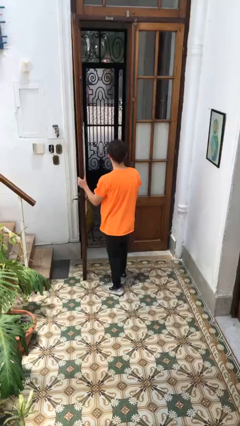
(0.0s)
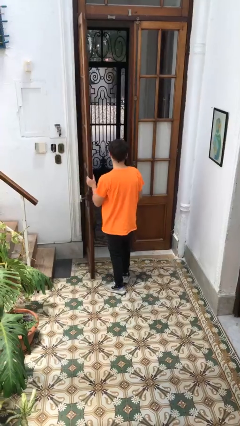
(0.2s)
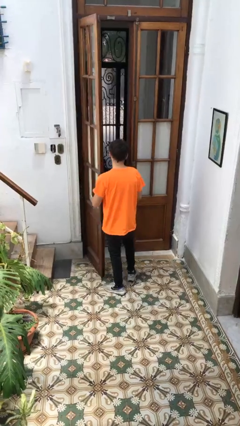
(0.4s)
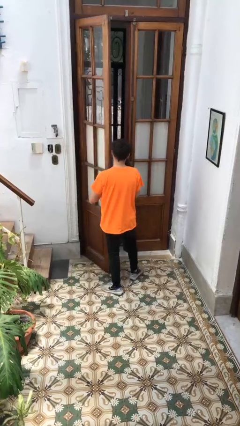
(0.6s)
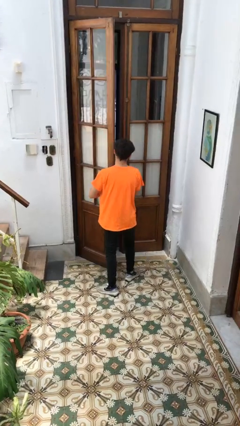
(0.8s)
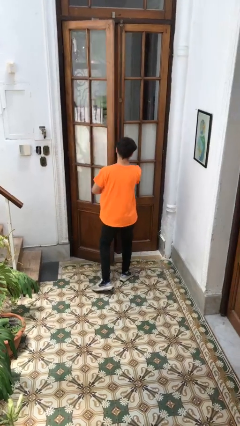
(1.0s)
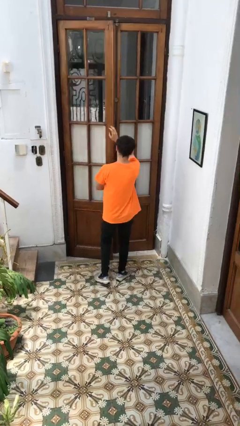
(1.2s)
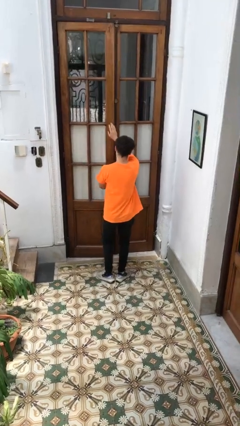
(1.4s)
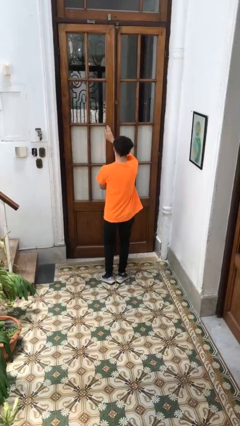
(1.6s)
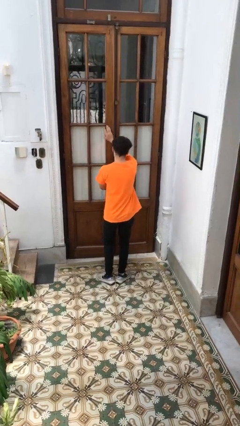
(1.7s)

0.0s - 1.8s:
person closes facility door

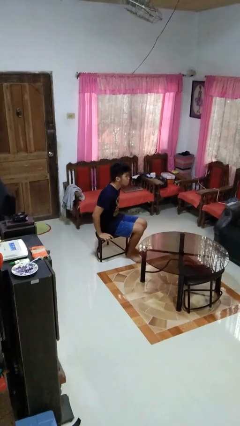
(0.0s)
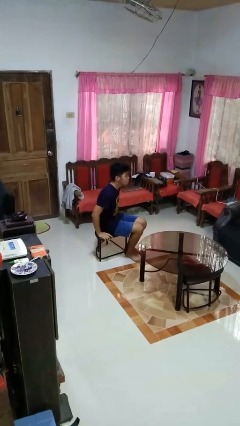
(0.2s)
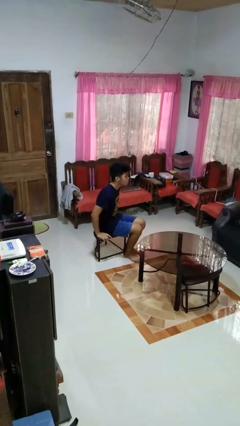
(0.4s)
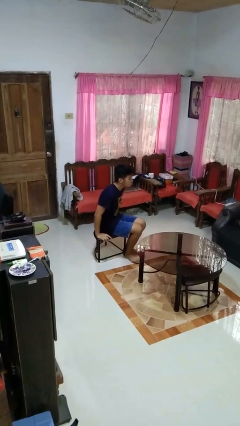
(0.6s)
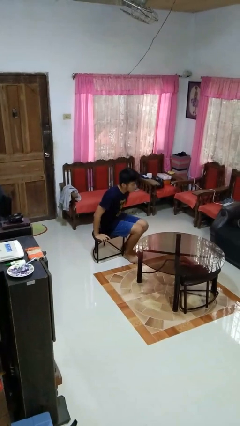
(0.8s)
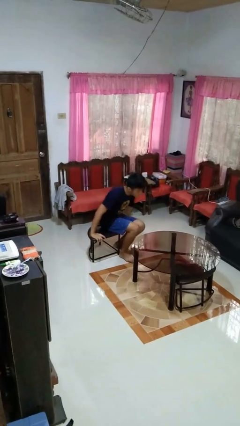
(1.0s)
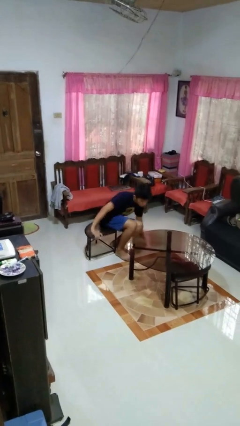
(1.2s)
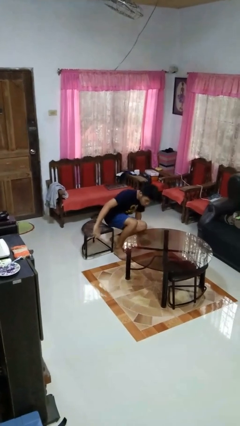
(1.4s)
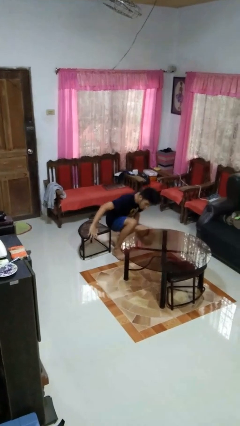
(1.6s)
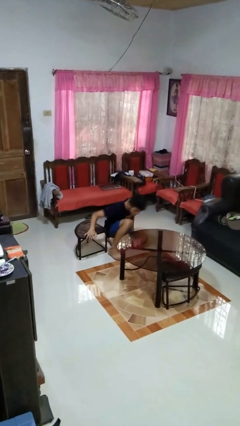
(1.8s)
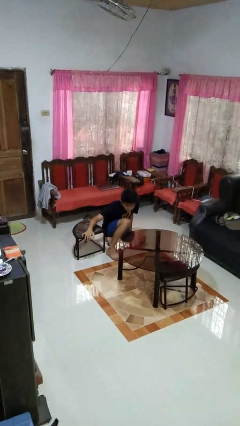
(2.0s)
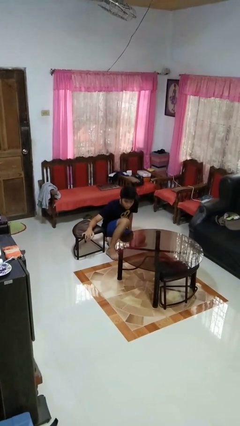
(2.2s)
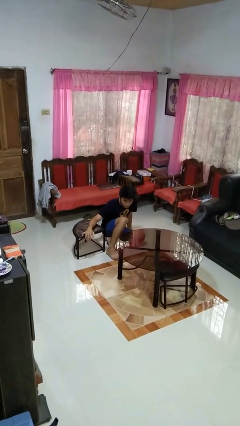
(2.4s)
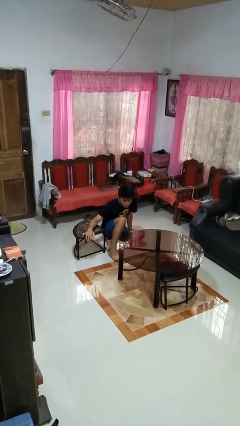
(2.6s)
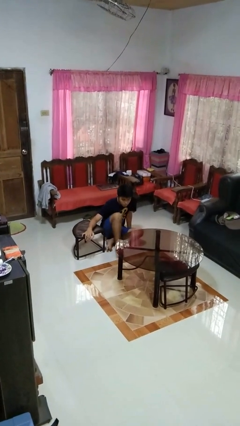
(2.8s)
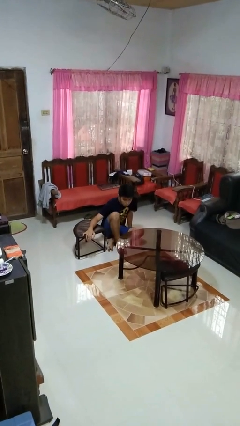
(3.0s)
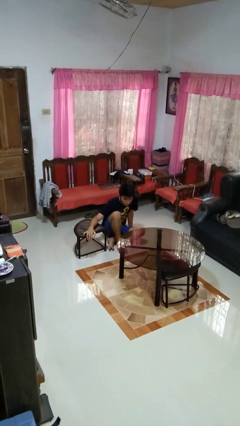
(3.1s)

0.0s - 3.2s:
person falls from chair

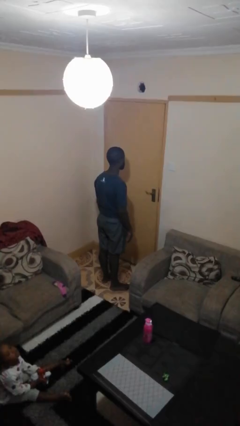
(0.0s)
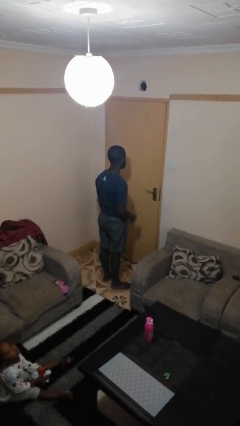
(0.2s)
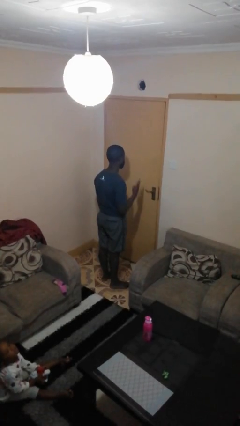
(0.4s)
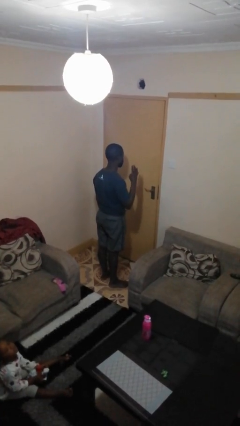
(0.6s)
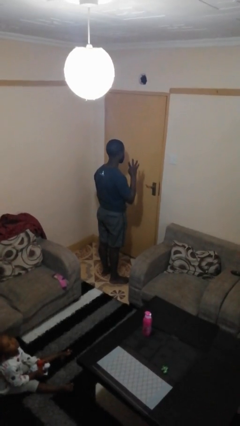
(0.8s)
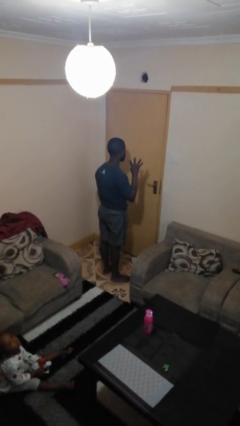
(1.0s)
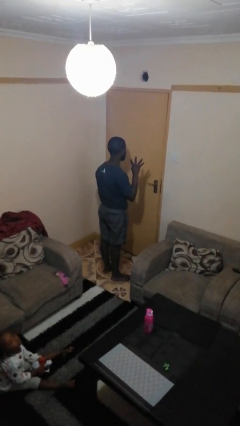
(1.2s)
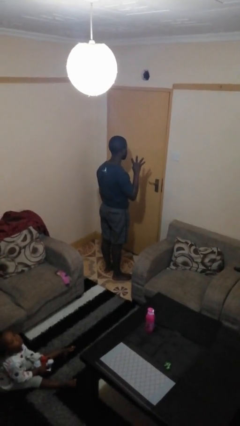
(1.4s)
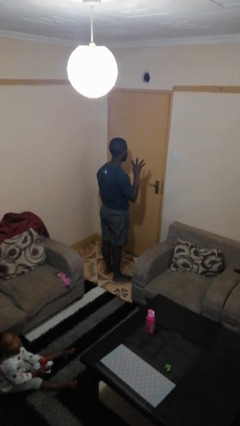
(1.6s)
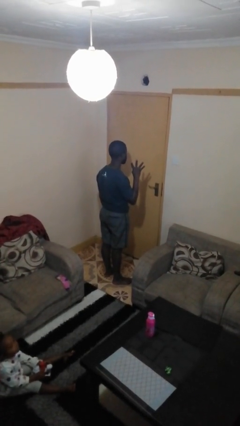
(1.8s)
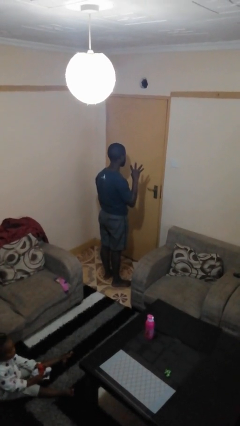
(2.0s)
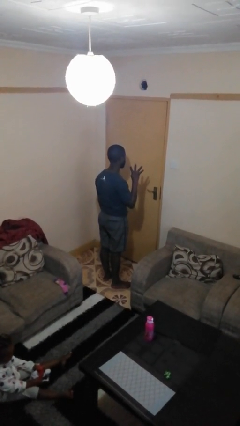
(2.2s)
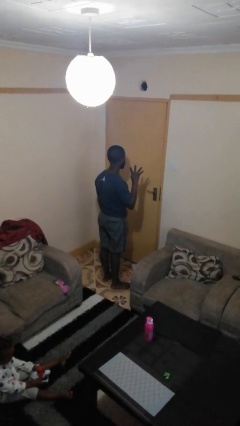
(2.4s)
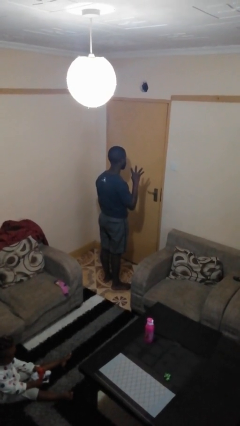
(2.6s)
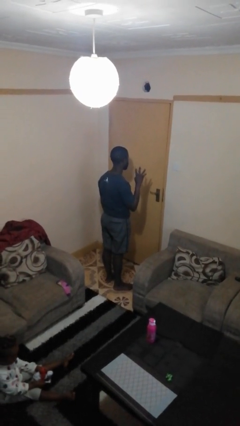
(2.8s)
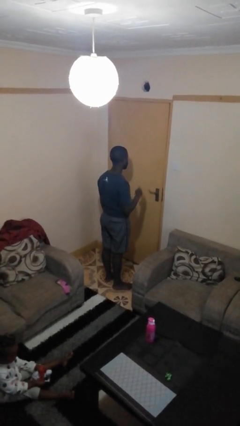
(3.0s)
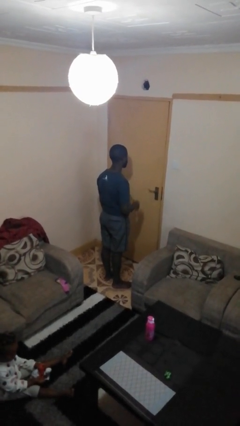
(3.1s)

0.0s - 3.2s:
person gestures number four

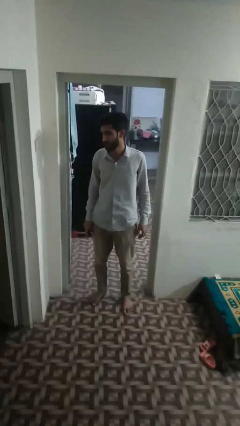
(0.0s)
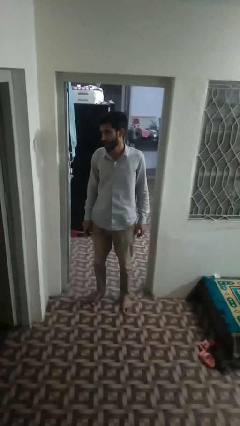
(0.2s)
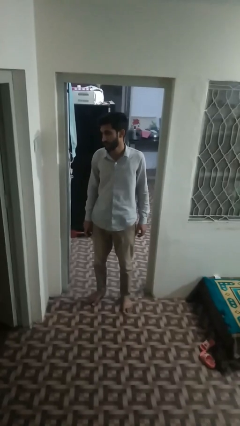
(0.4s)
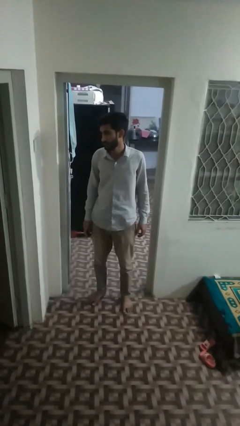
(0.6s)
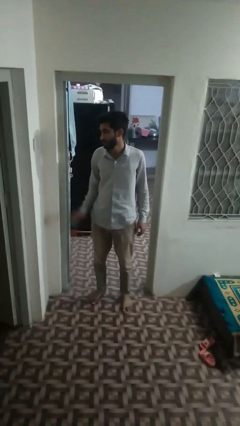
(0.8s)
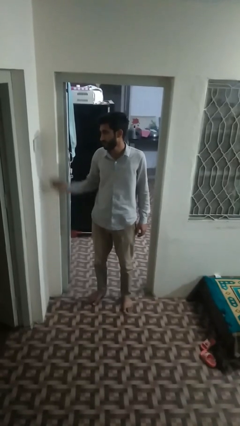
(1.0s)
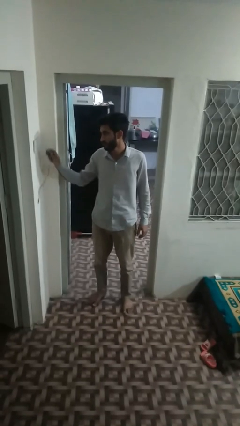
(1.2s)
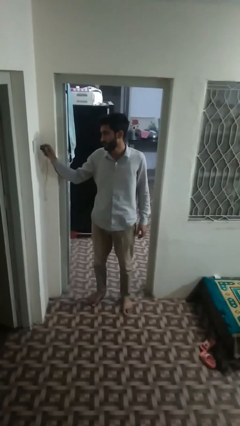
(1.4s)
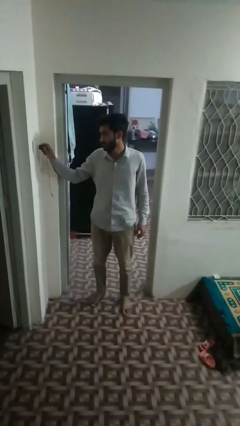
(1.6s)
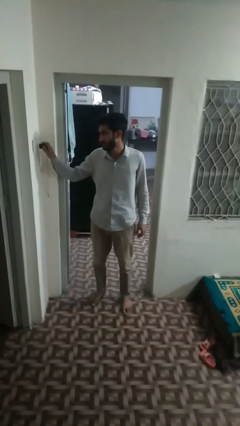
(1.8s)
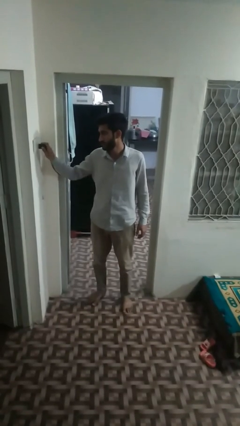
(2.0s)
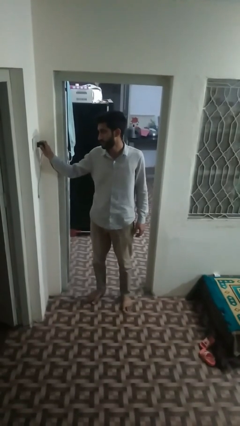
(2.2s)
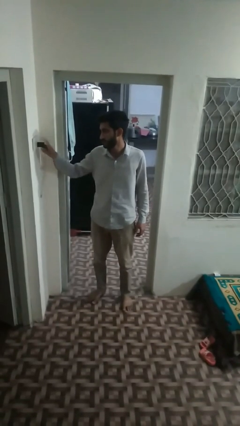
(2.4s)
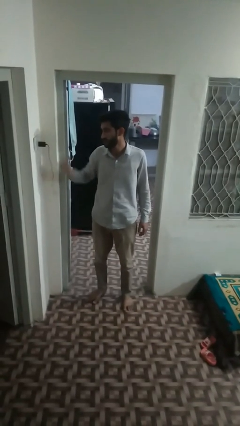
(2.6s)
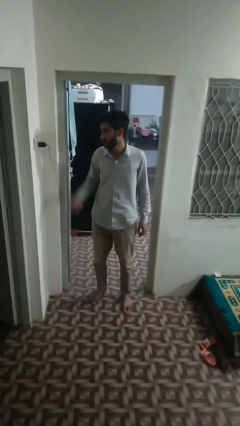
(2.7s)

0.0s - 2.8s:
person plugs into electrical socket

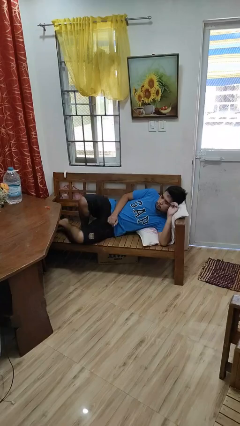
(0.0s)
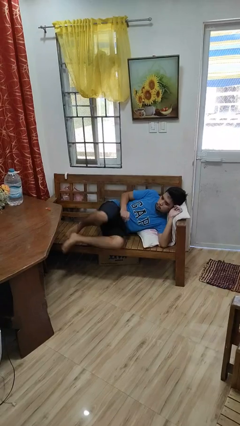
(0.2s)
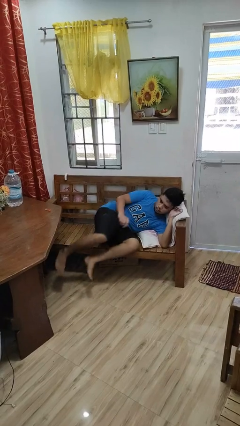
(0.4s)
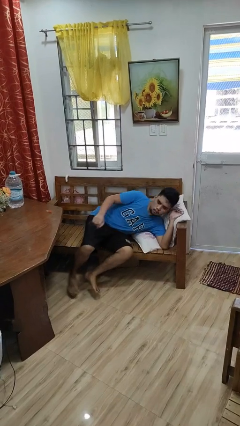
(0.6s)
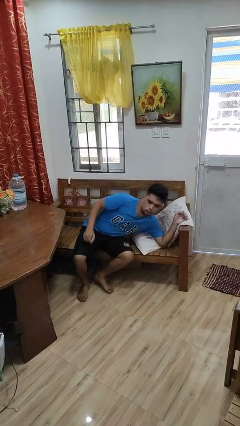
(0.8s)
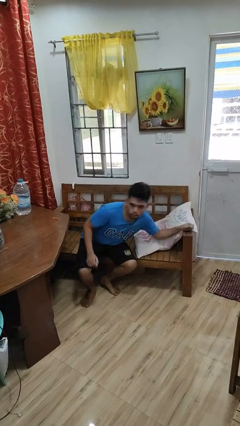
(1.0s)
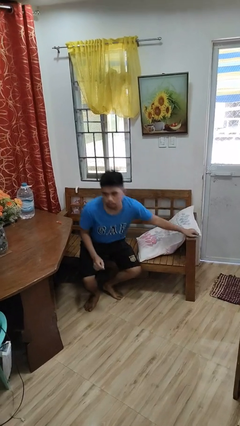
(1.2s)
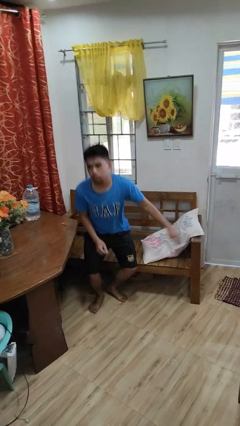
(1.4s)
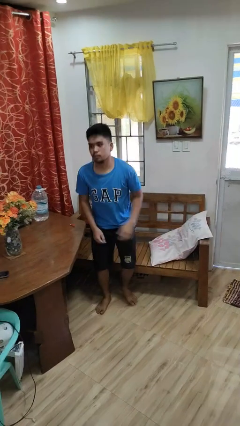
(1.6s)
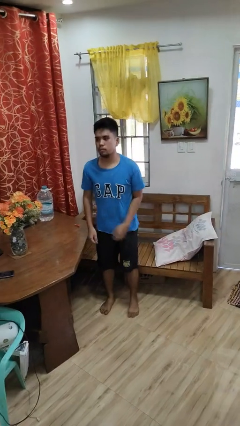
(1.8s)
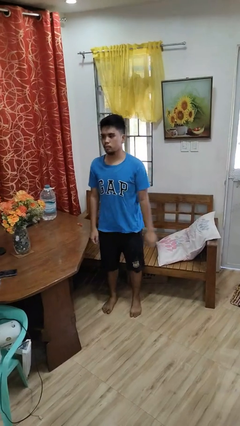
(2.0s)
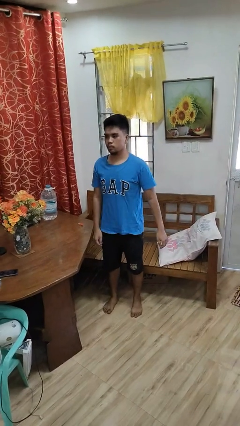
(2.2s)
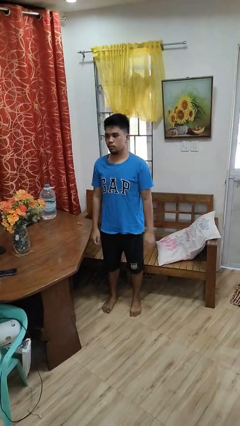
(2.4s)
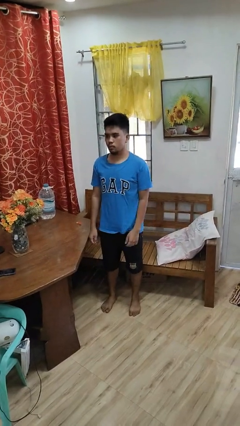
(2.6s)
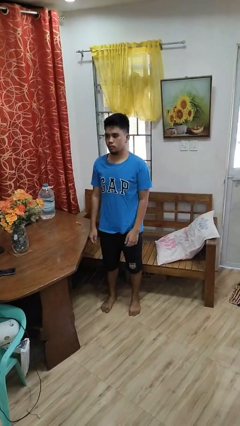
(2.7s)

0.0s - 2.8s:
person stands up

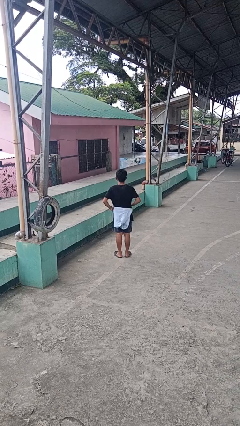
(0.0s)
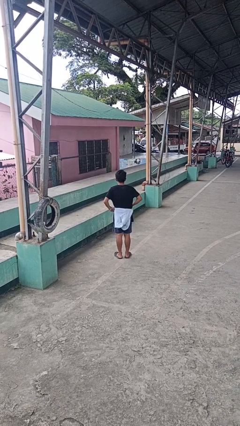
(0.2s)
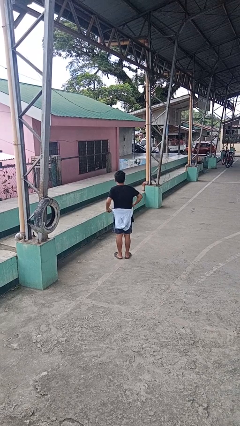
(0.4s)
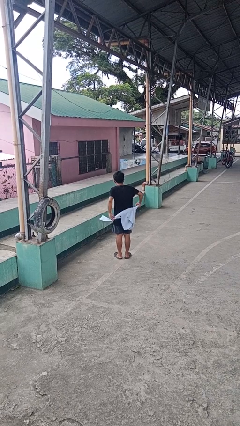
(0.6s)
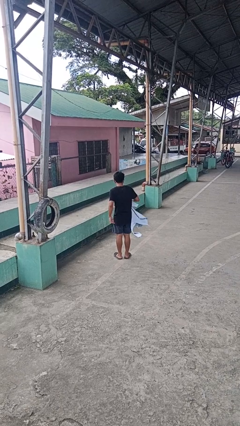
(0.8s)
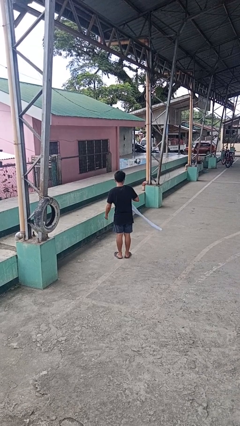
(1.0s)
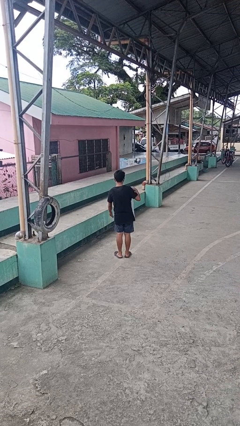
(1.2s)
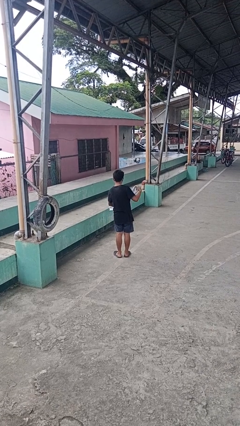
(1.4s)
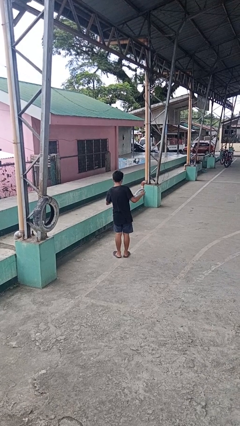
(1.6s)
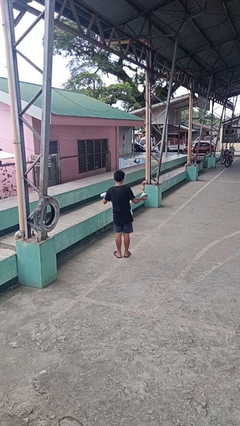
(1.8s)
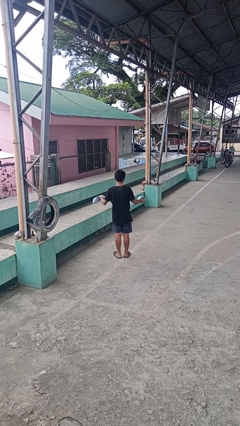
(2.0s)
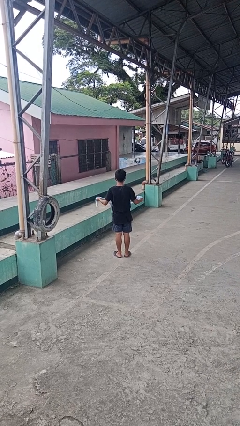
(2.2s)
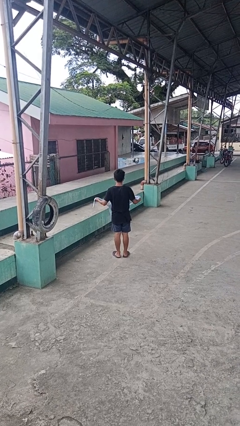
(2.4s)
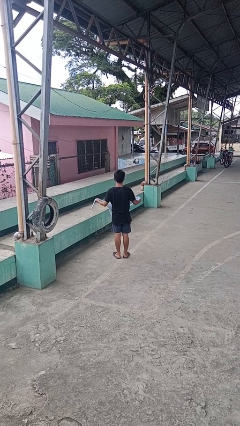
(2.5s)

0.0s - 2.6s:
person unties jacket around waist

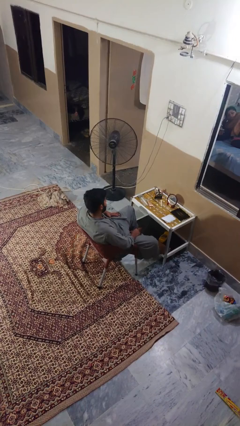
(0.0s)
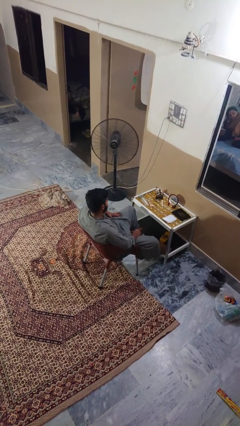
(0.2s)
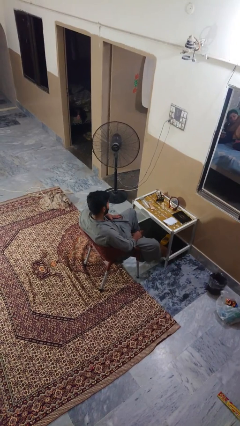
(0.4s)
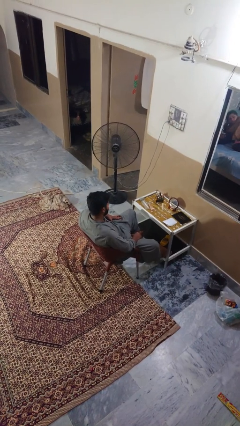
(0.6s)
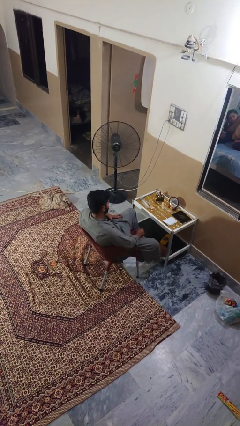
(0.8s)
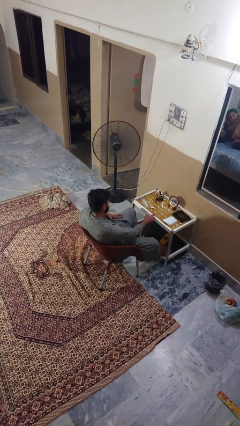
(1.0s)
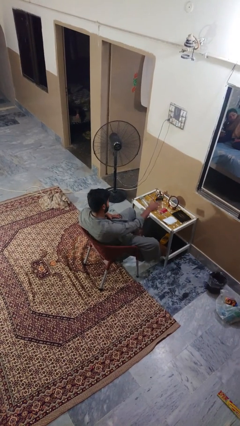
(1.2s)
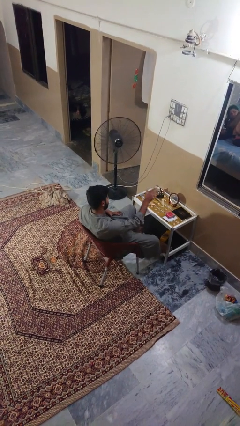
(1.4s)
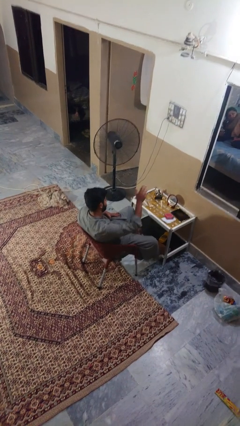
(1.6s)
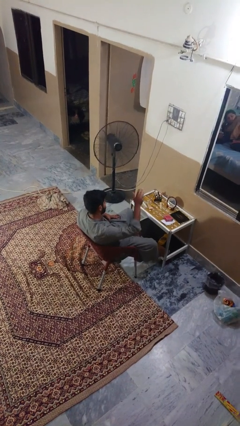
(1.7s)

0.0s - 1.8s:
person throws object on table
